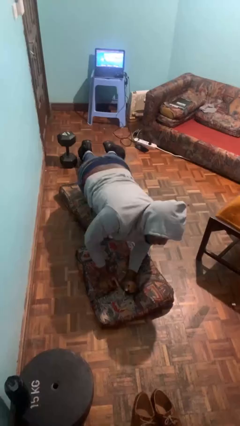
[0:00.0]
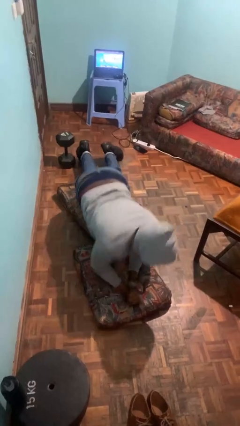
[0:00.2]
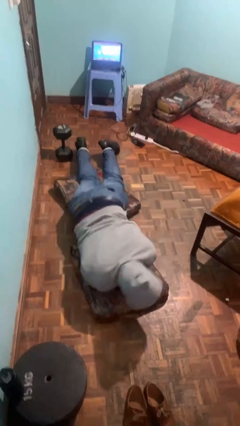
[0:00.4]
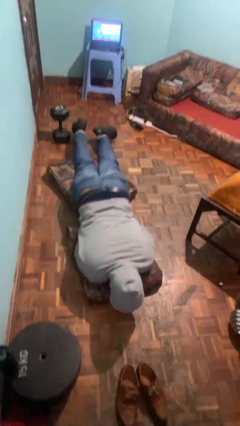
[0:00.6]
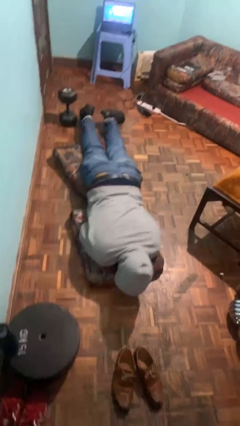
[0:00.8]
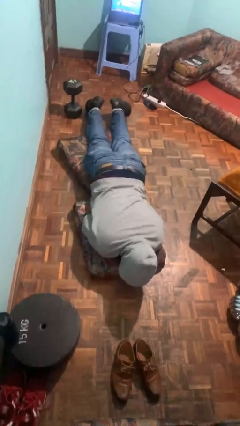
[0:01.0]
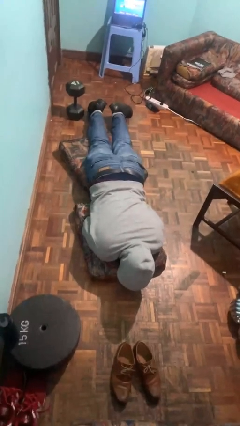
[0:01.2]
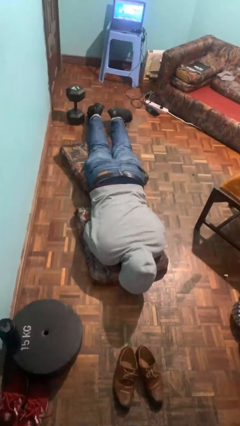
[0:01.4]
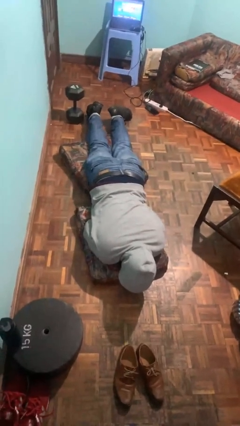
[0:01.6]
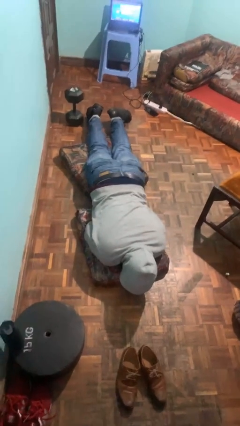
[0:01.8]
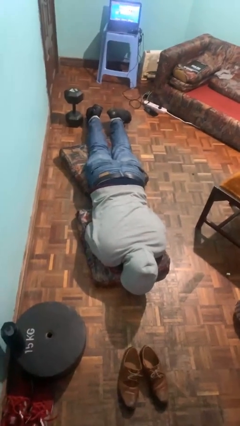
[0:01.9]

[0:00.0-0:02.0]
person lies down on floor

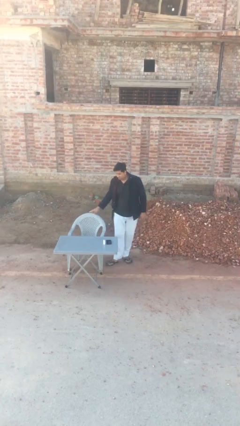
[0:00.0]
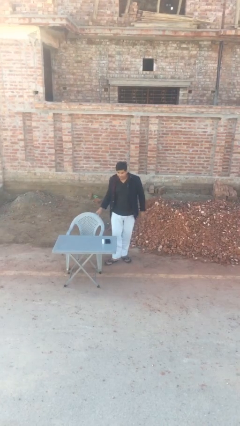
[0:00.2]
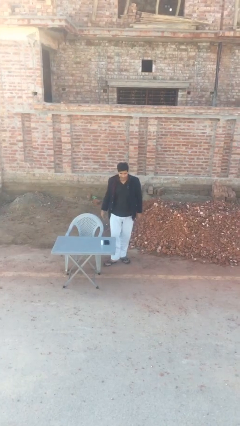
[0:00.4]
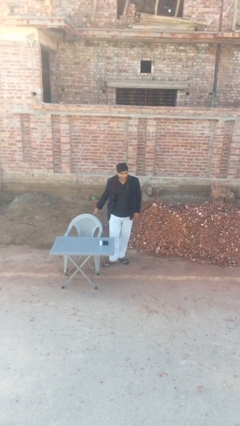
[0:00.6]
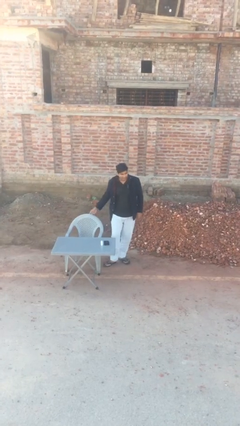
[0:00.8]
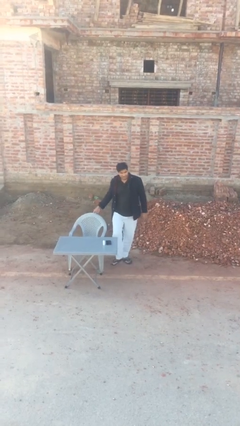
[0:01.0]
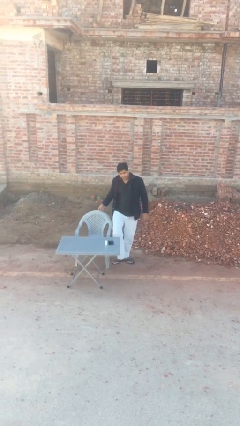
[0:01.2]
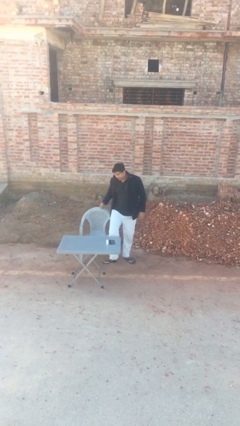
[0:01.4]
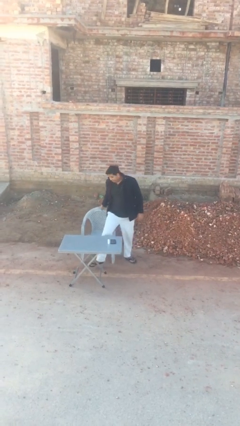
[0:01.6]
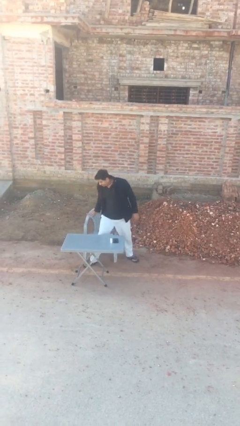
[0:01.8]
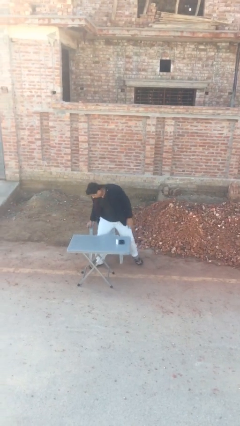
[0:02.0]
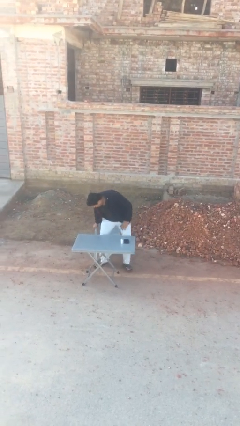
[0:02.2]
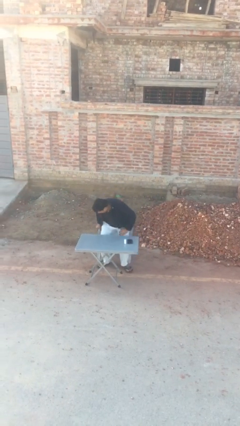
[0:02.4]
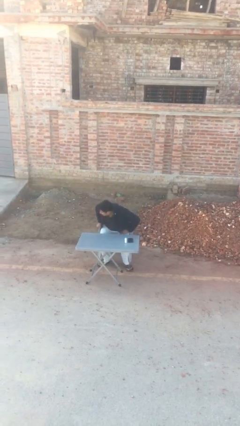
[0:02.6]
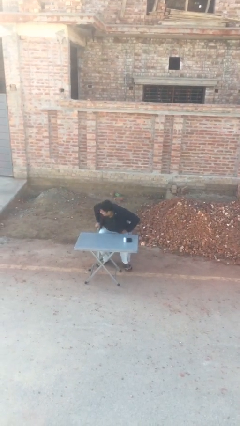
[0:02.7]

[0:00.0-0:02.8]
person sits down

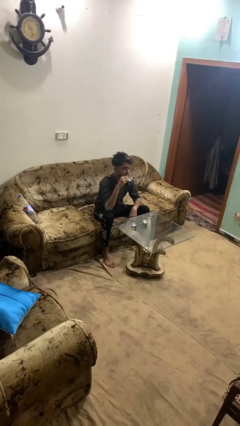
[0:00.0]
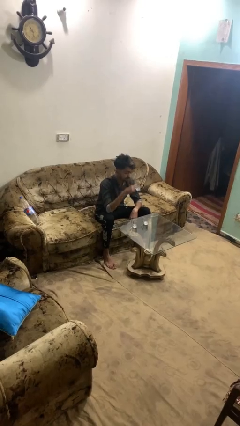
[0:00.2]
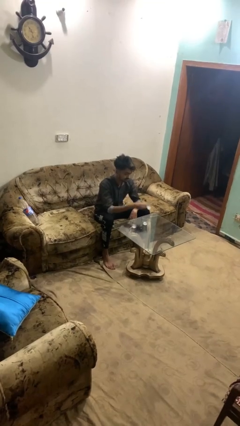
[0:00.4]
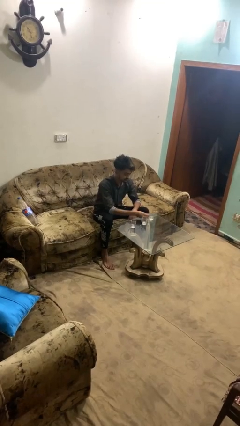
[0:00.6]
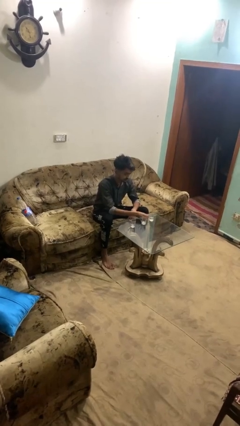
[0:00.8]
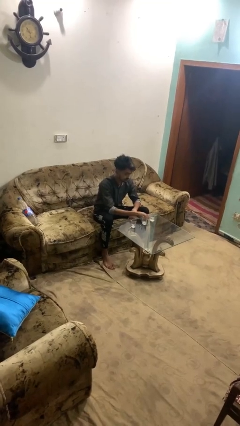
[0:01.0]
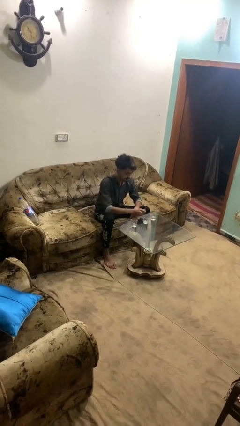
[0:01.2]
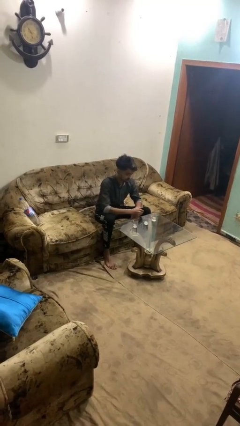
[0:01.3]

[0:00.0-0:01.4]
person puts down object on table

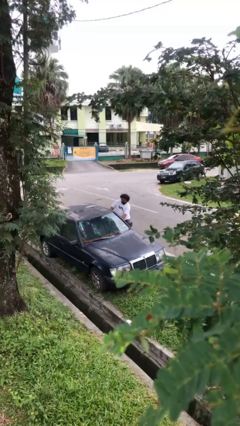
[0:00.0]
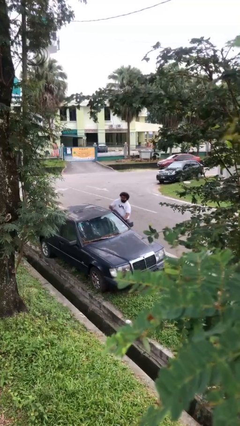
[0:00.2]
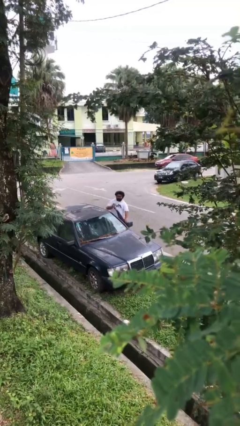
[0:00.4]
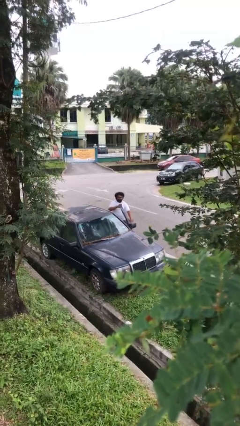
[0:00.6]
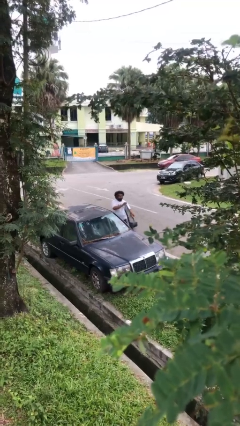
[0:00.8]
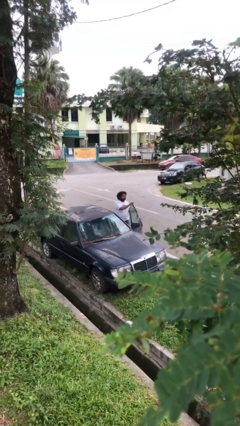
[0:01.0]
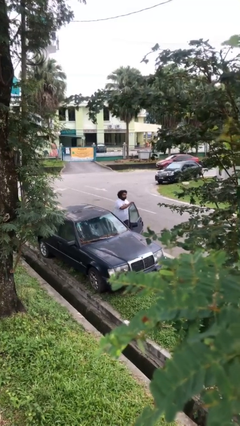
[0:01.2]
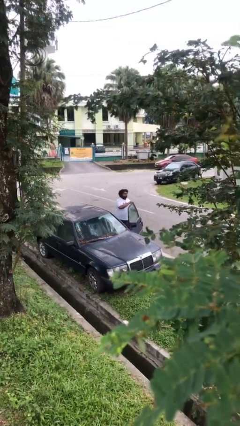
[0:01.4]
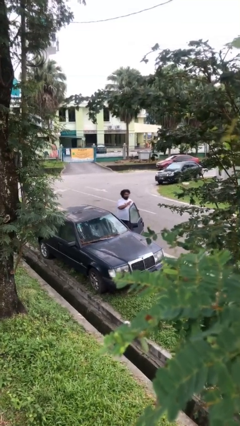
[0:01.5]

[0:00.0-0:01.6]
person opens car door

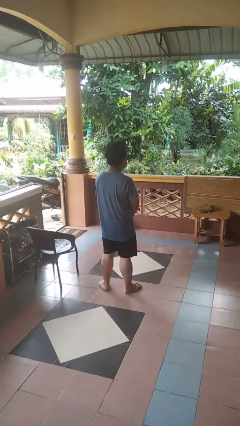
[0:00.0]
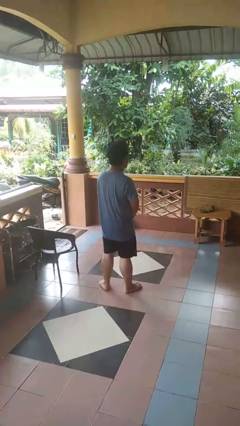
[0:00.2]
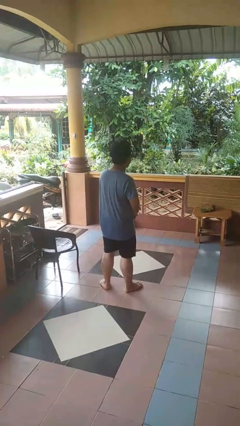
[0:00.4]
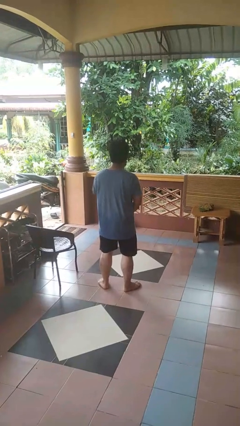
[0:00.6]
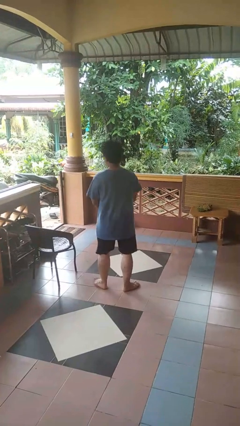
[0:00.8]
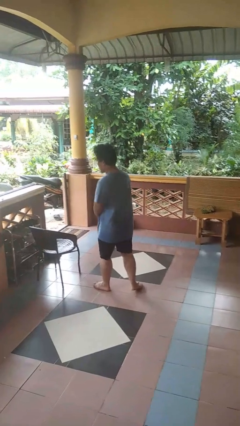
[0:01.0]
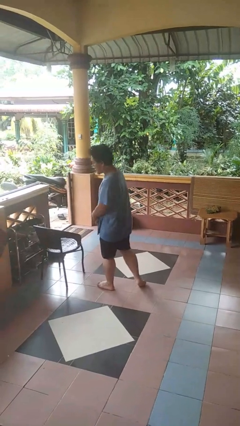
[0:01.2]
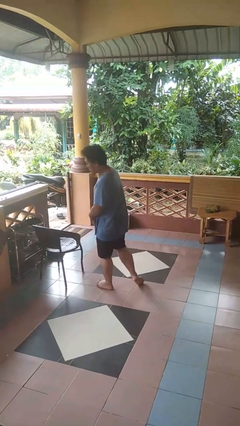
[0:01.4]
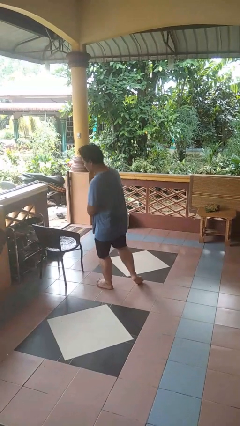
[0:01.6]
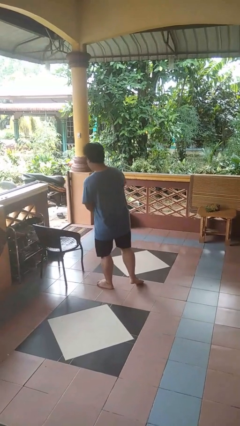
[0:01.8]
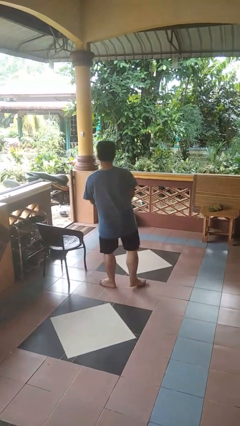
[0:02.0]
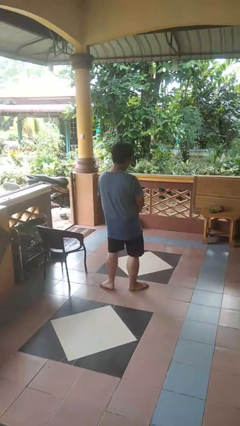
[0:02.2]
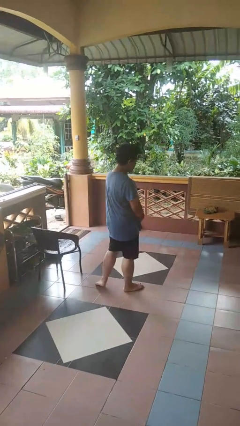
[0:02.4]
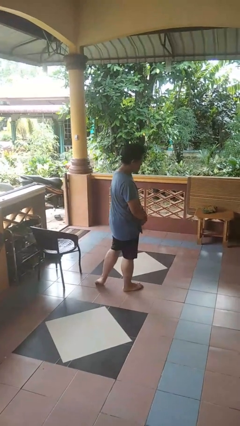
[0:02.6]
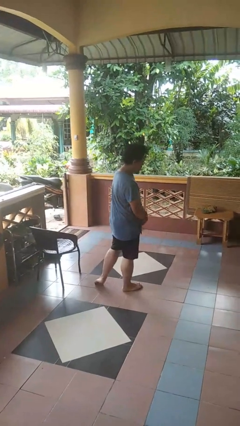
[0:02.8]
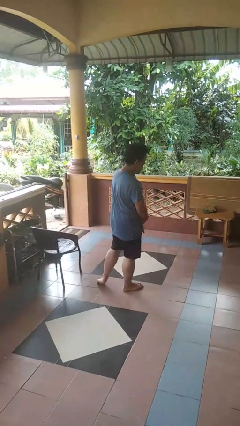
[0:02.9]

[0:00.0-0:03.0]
person twirls

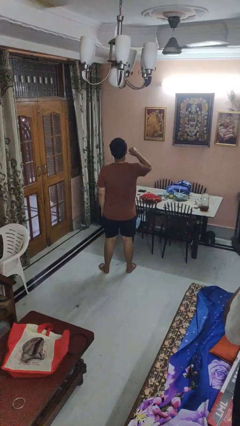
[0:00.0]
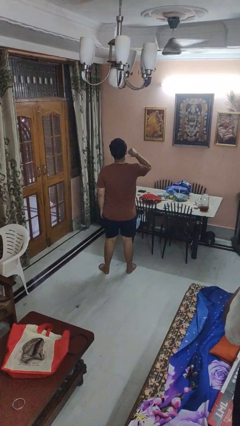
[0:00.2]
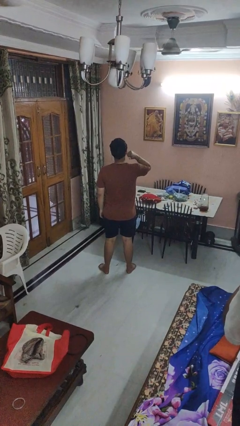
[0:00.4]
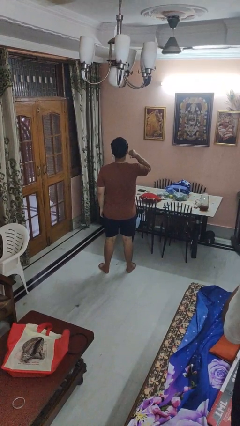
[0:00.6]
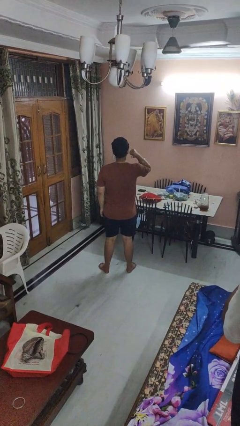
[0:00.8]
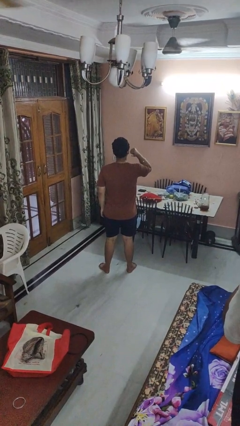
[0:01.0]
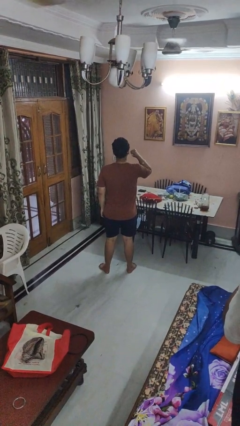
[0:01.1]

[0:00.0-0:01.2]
person gestures behind me

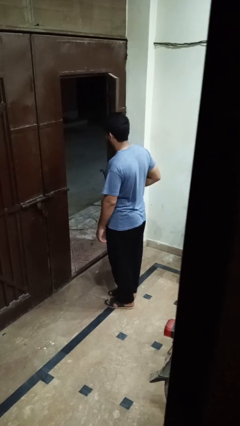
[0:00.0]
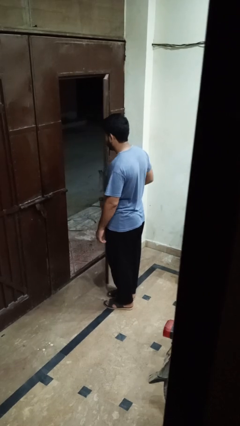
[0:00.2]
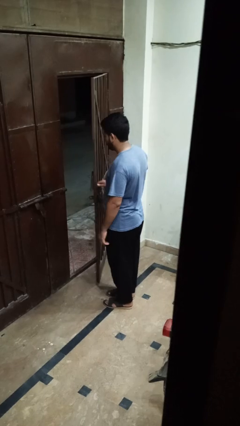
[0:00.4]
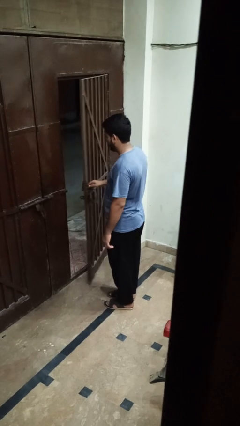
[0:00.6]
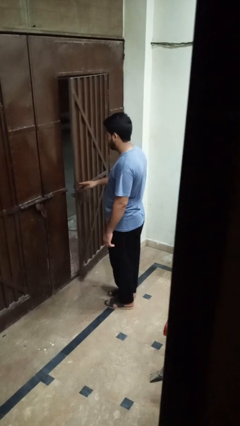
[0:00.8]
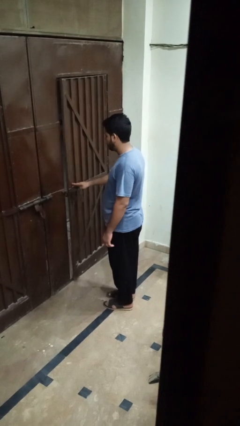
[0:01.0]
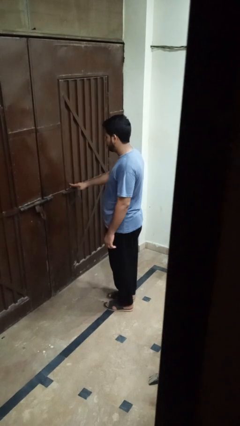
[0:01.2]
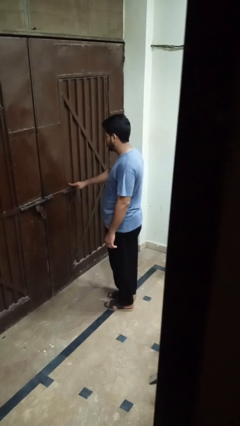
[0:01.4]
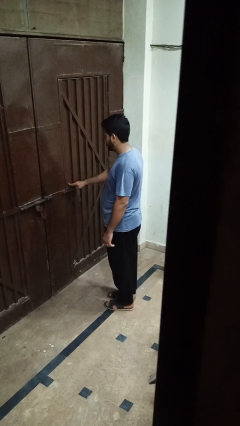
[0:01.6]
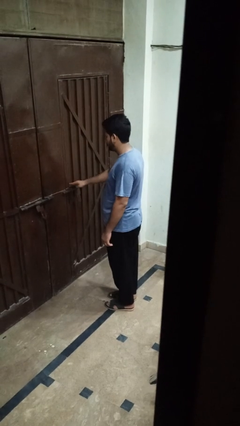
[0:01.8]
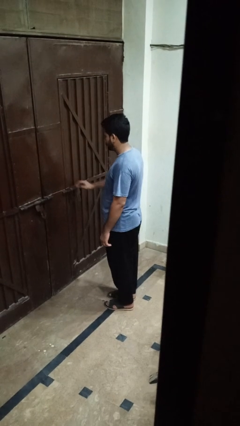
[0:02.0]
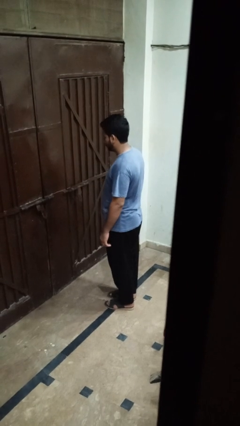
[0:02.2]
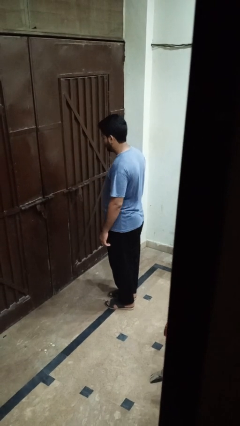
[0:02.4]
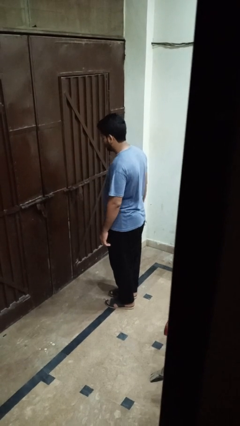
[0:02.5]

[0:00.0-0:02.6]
person closes gate

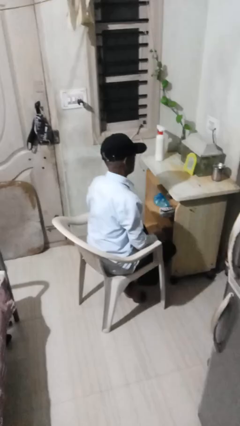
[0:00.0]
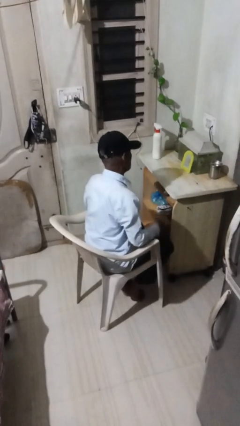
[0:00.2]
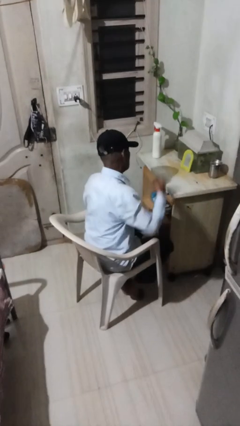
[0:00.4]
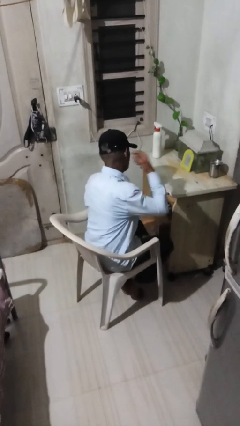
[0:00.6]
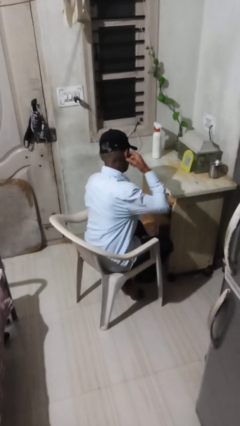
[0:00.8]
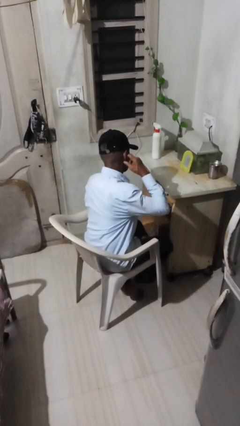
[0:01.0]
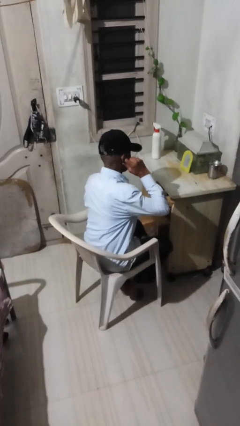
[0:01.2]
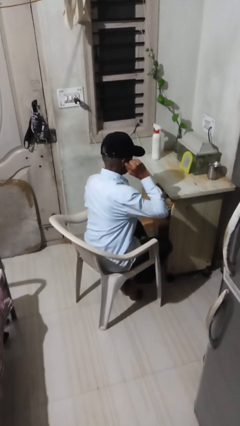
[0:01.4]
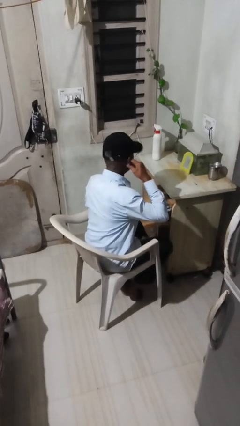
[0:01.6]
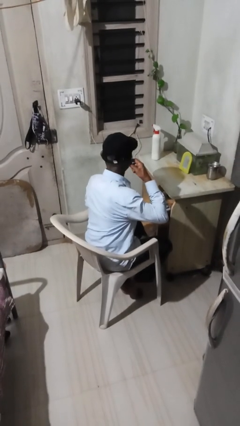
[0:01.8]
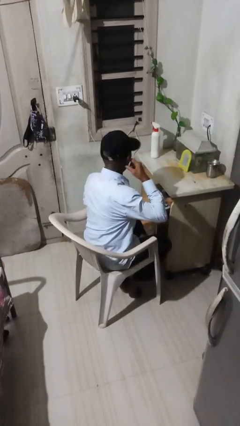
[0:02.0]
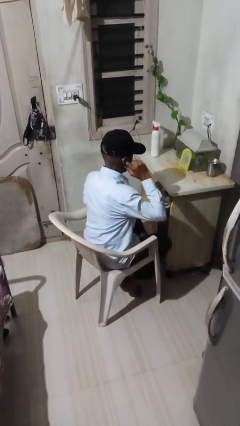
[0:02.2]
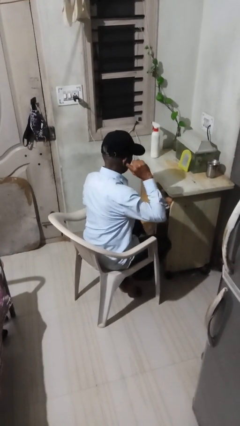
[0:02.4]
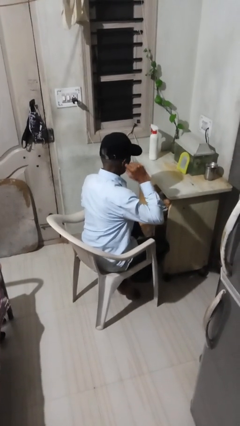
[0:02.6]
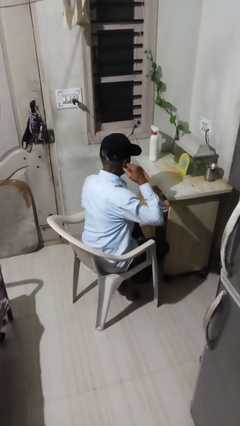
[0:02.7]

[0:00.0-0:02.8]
person puts fingers in ear
